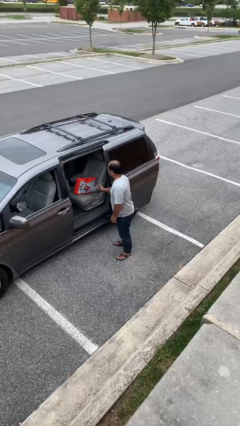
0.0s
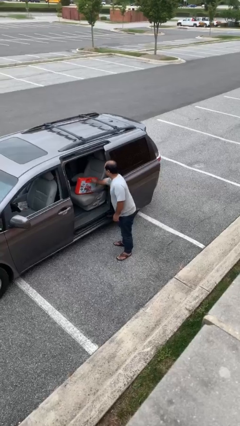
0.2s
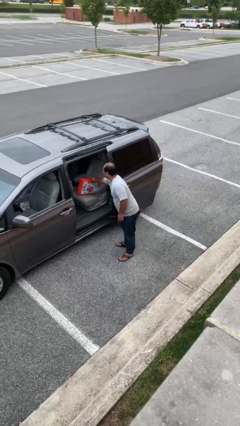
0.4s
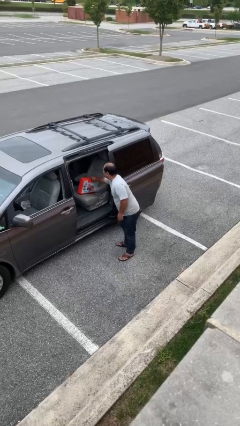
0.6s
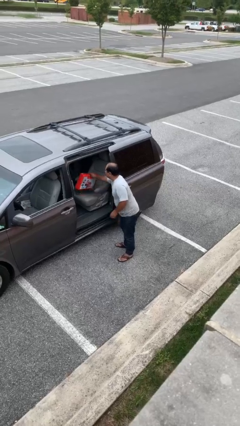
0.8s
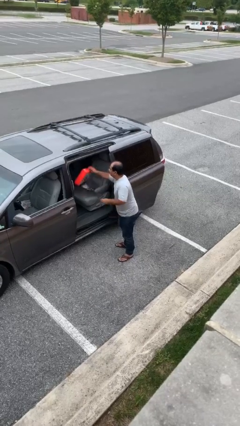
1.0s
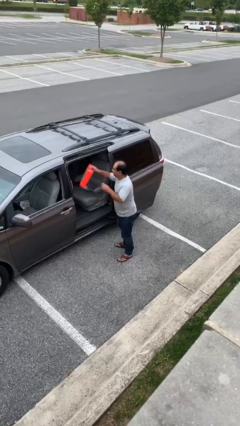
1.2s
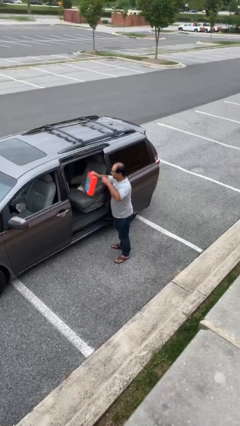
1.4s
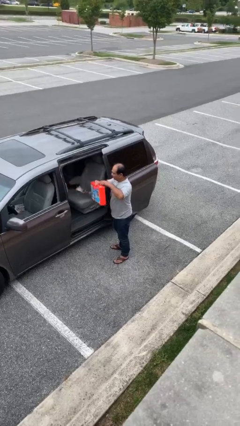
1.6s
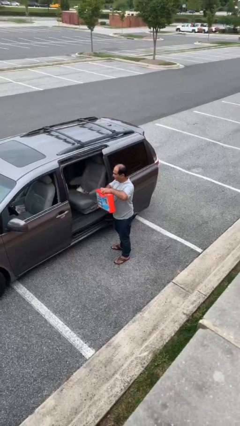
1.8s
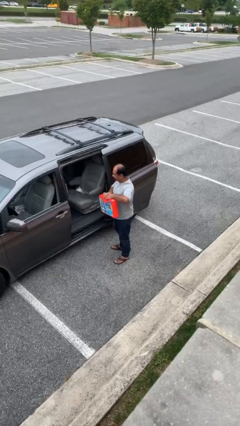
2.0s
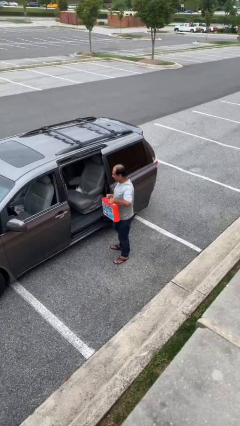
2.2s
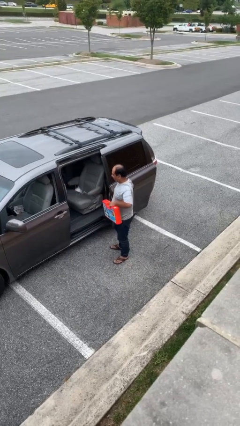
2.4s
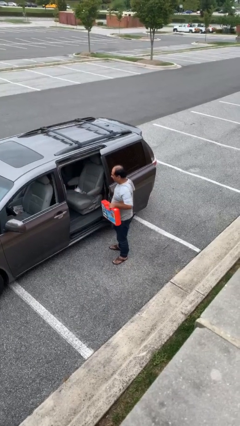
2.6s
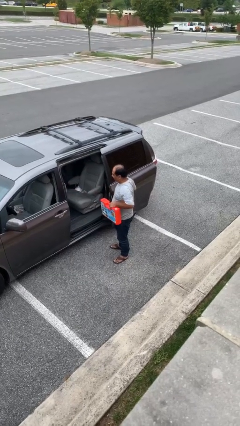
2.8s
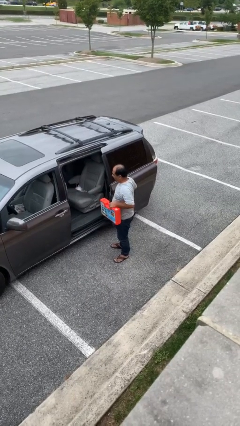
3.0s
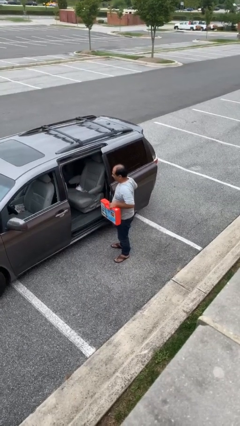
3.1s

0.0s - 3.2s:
person unloads car

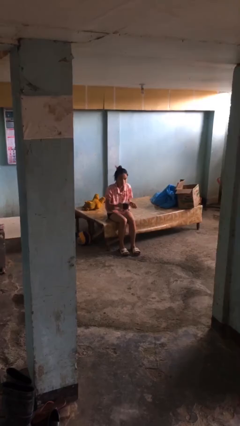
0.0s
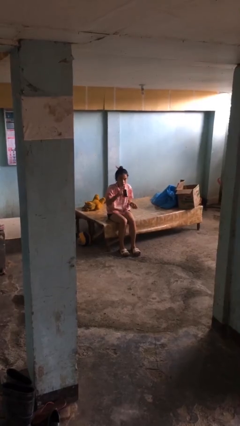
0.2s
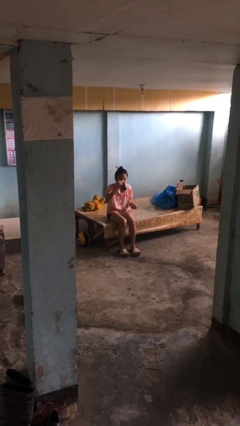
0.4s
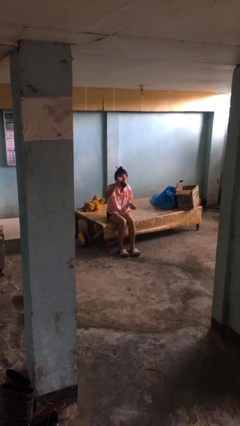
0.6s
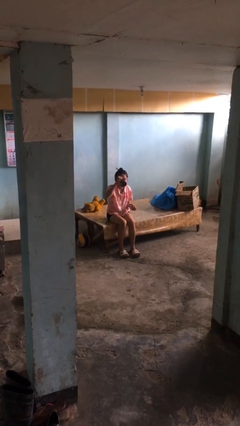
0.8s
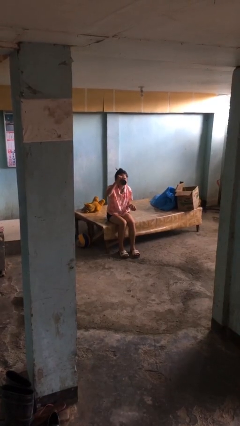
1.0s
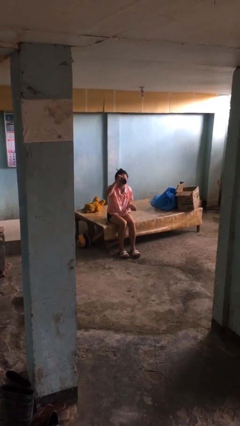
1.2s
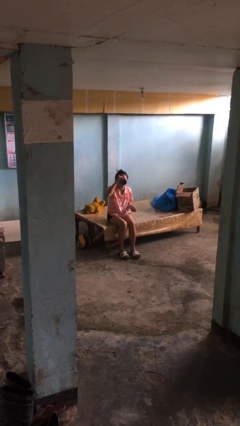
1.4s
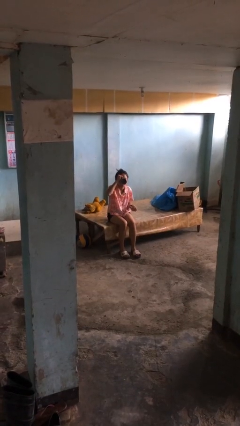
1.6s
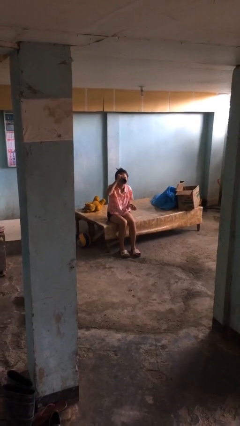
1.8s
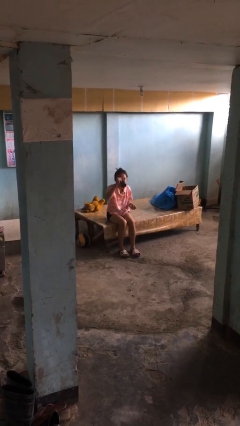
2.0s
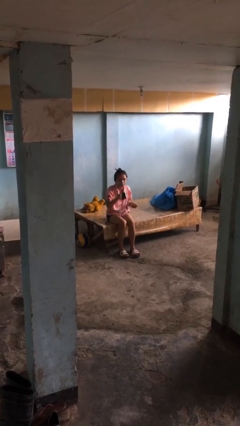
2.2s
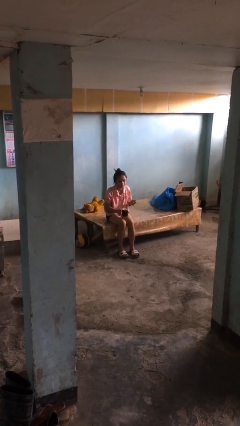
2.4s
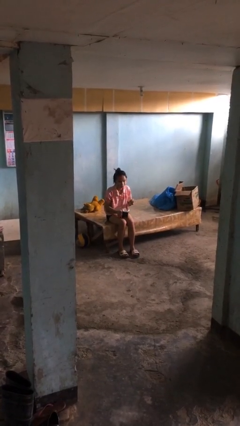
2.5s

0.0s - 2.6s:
person drinks from mug

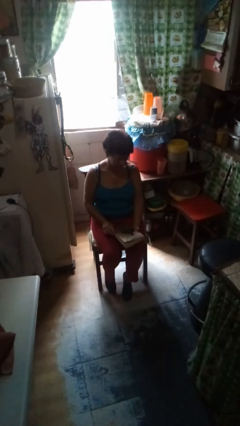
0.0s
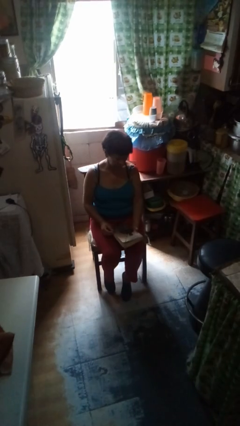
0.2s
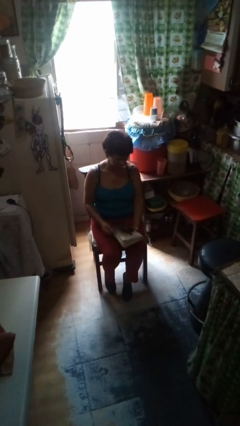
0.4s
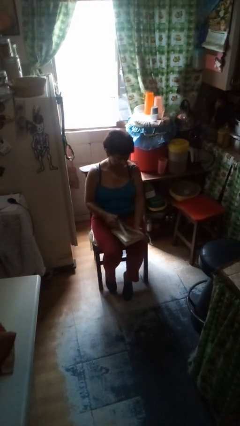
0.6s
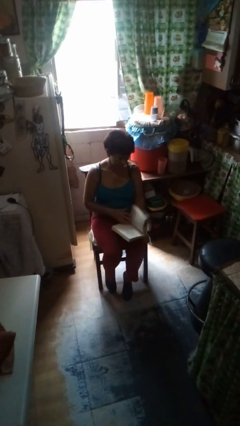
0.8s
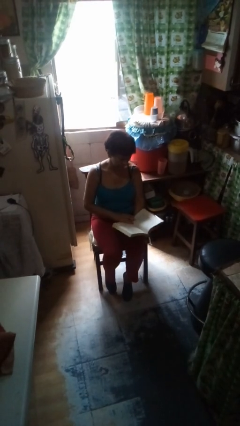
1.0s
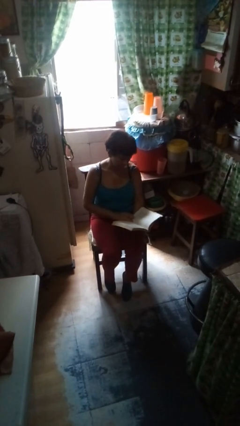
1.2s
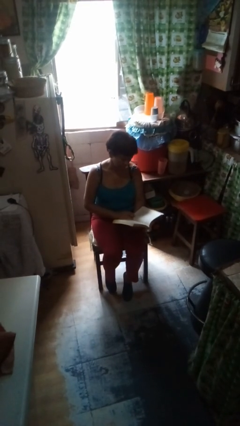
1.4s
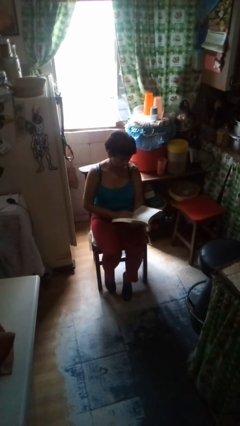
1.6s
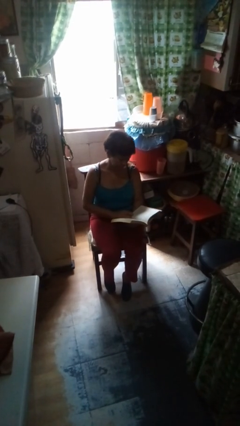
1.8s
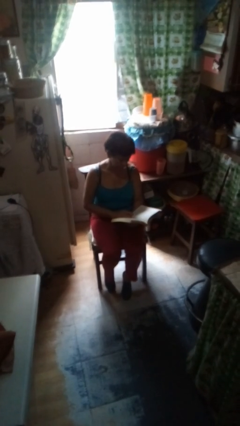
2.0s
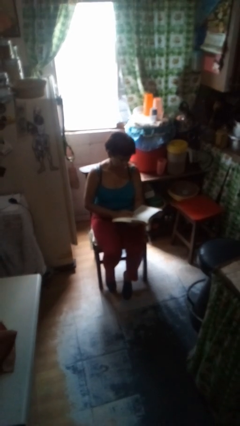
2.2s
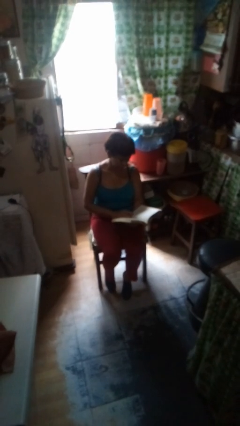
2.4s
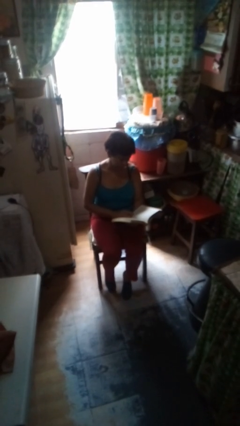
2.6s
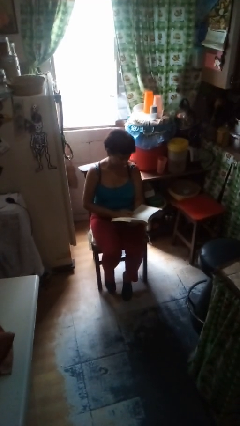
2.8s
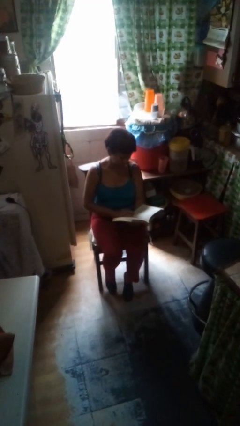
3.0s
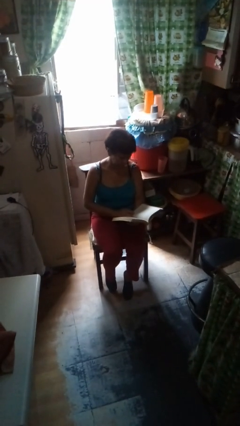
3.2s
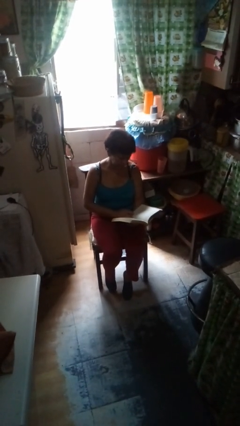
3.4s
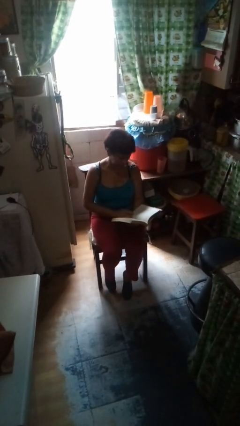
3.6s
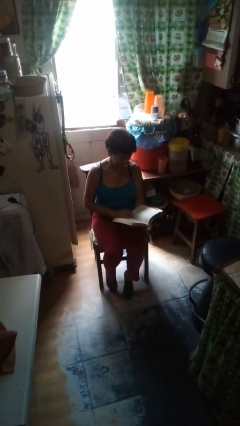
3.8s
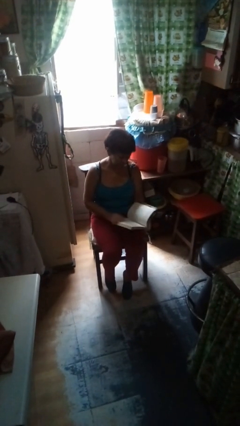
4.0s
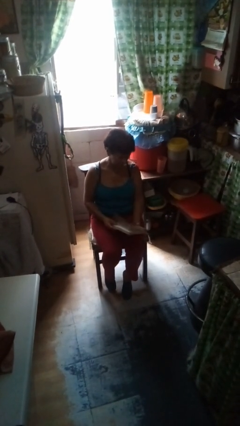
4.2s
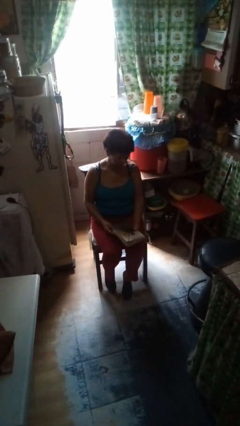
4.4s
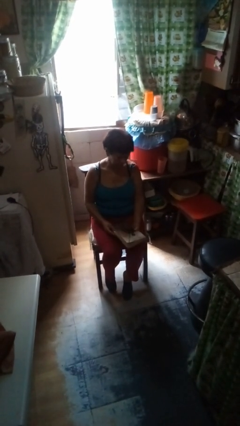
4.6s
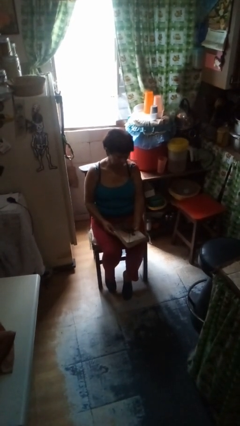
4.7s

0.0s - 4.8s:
person reads book

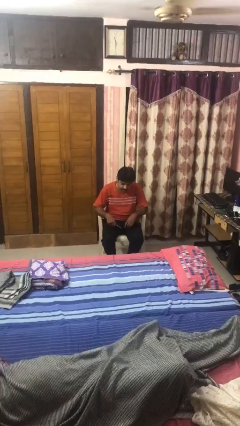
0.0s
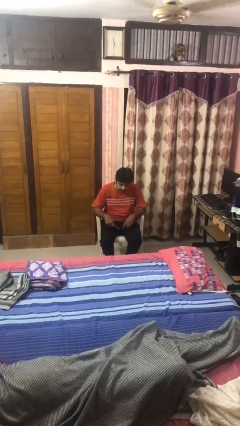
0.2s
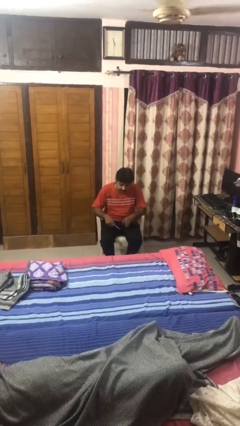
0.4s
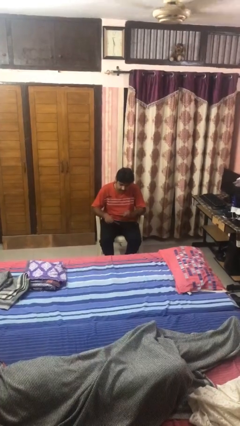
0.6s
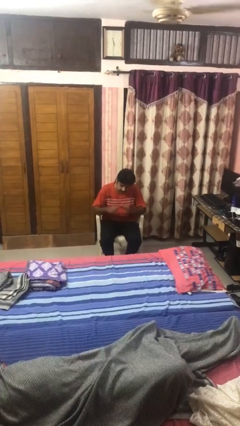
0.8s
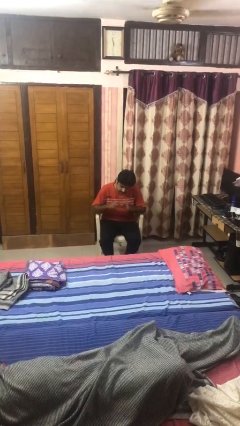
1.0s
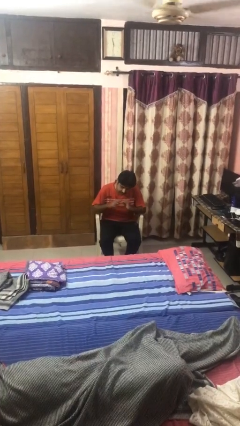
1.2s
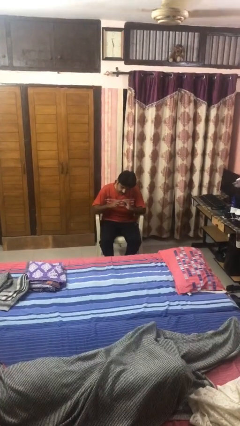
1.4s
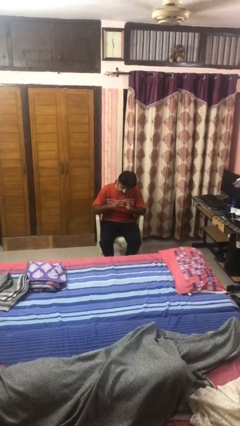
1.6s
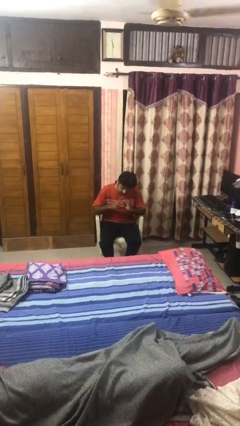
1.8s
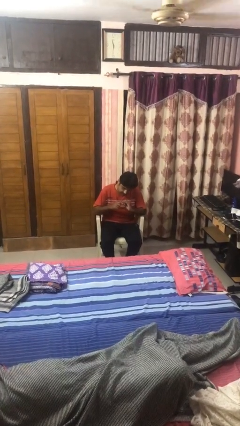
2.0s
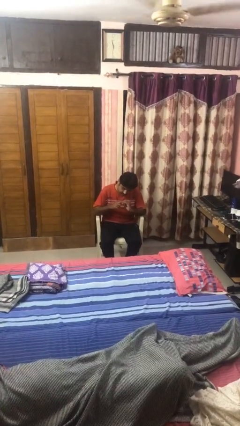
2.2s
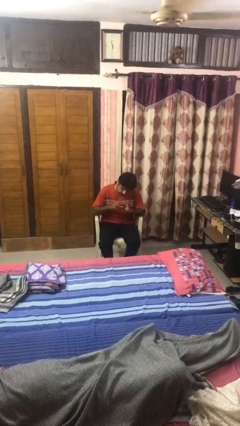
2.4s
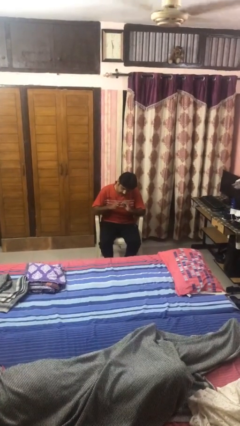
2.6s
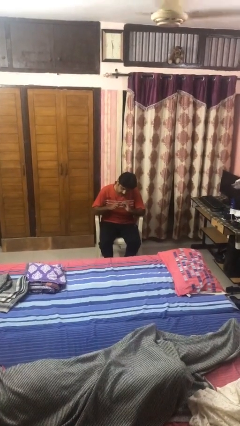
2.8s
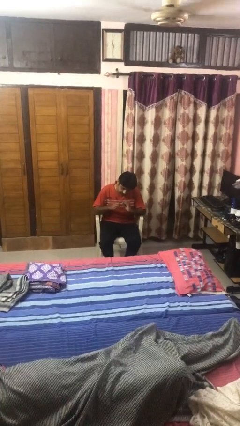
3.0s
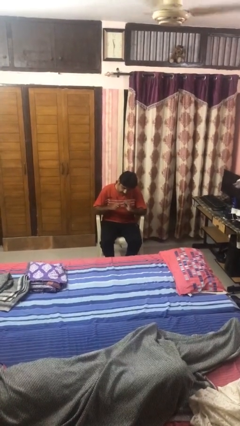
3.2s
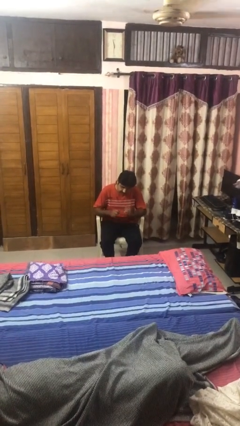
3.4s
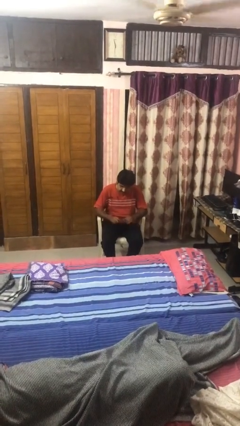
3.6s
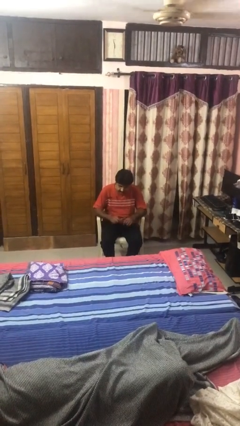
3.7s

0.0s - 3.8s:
person files fingernails

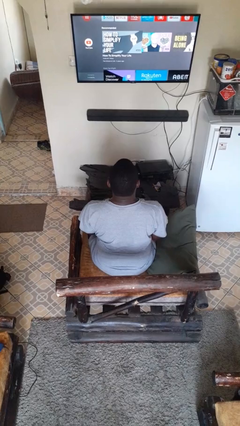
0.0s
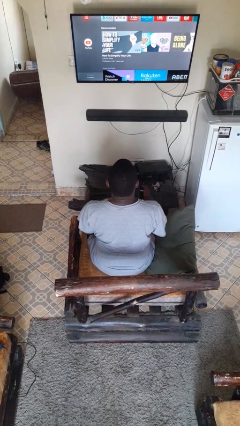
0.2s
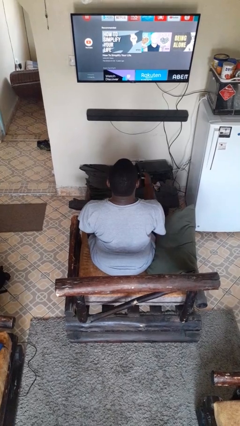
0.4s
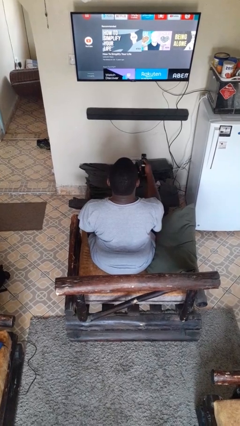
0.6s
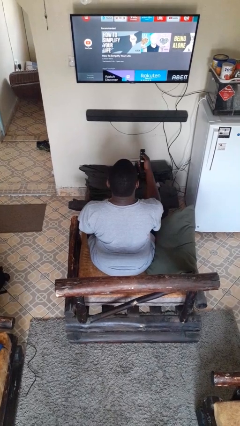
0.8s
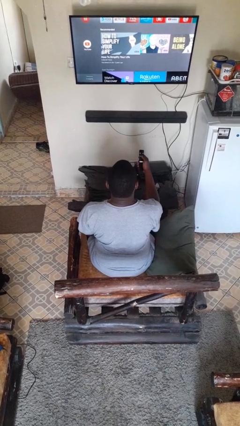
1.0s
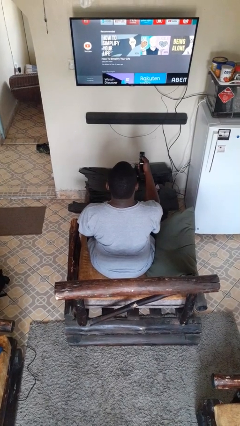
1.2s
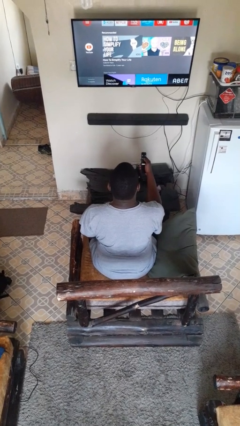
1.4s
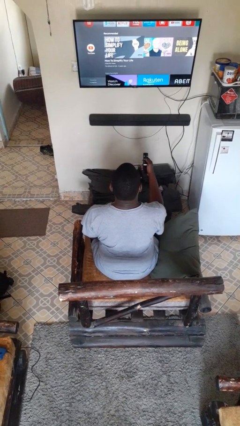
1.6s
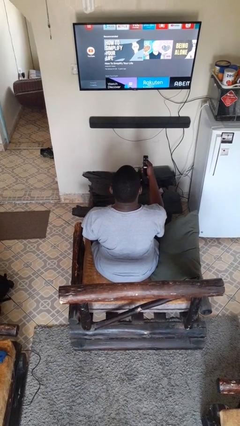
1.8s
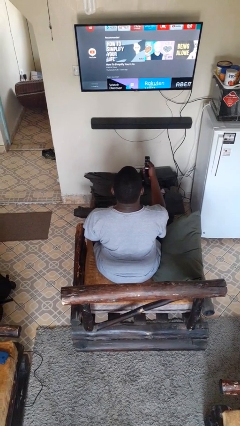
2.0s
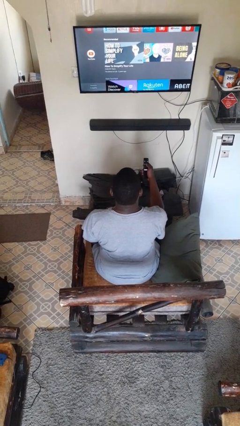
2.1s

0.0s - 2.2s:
person uses television remote

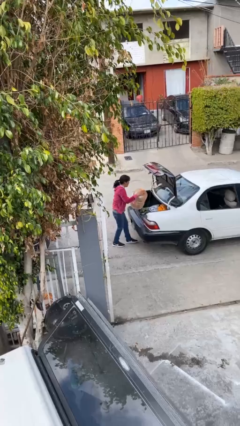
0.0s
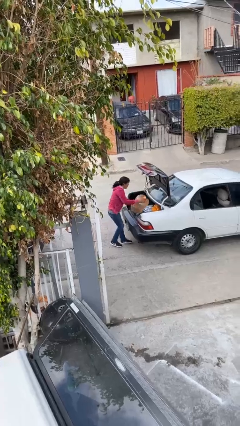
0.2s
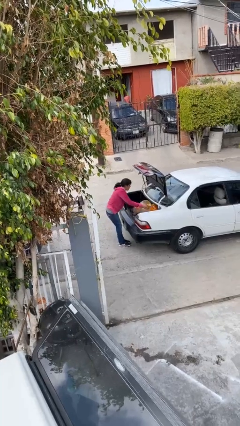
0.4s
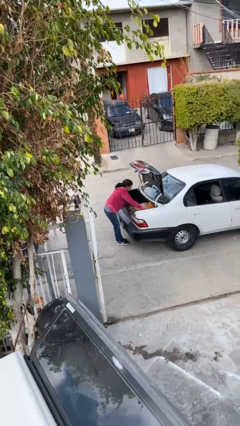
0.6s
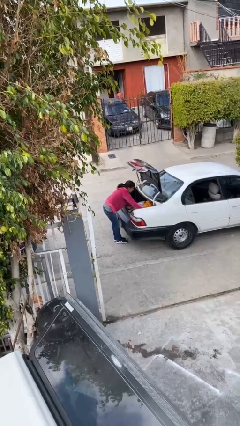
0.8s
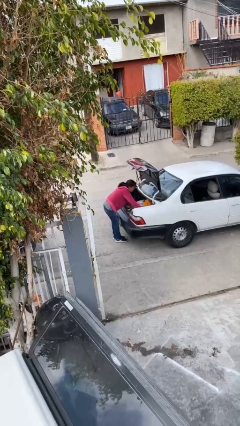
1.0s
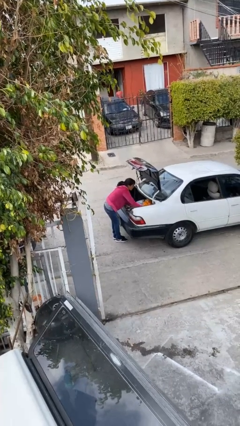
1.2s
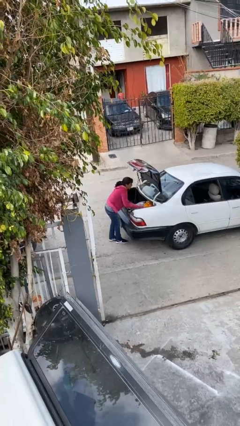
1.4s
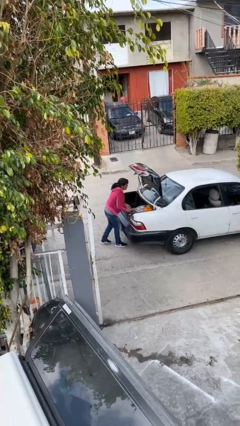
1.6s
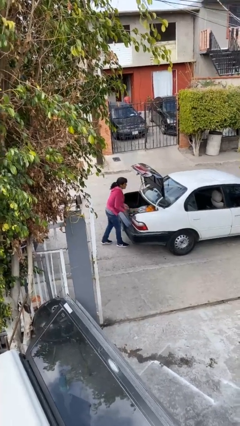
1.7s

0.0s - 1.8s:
person loads car
